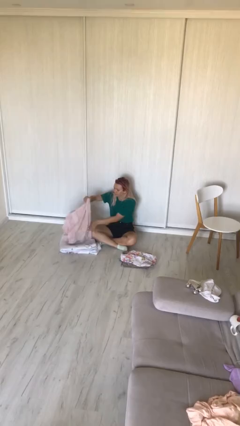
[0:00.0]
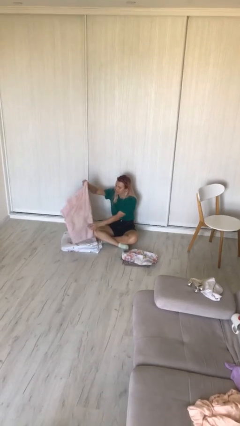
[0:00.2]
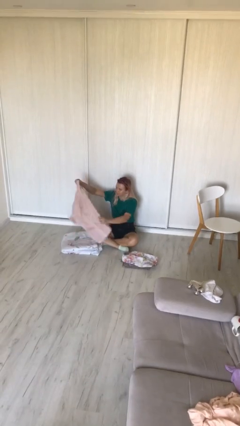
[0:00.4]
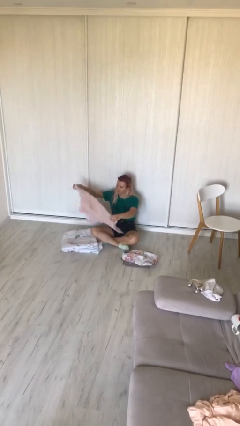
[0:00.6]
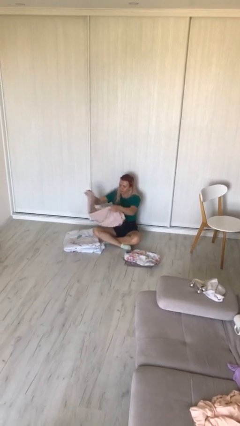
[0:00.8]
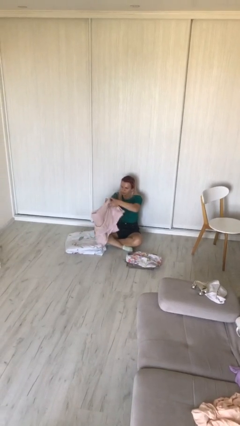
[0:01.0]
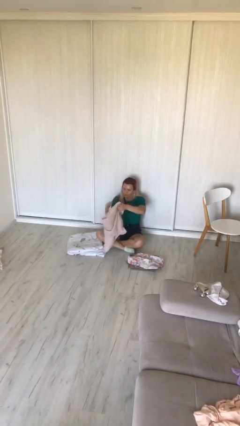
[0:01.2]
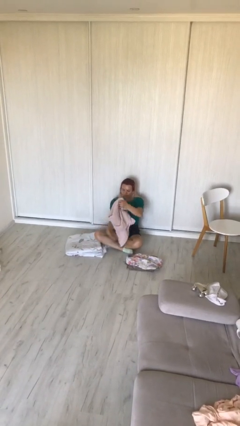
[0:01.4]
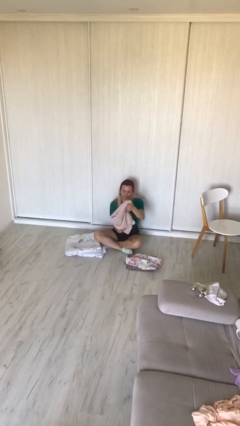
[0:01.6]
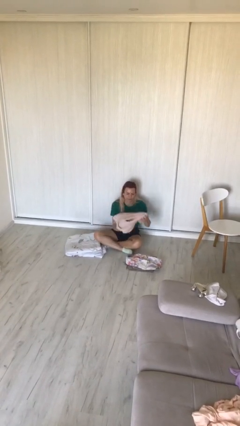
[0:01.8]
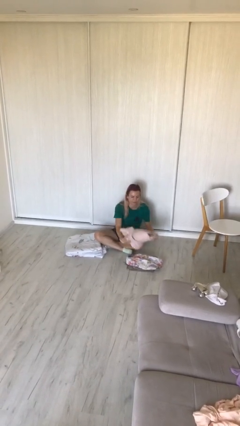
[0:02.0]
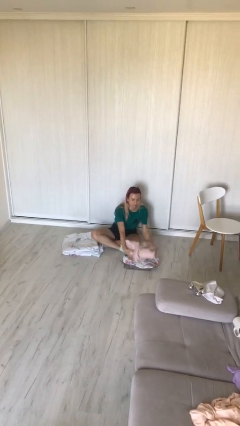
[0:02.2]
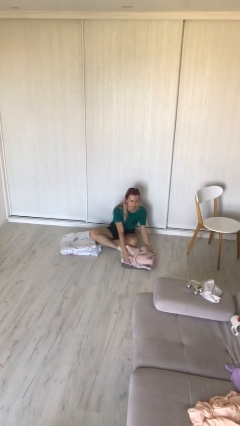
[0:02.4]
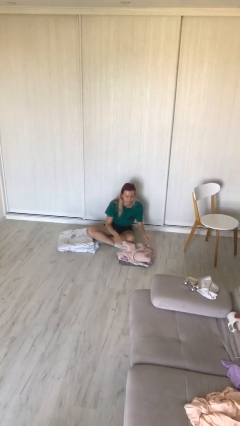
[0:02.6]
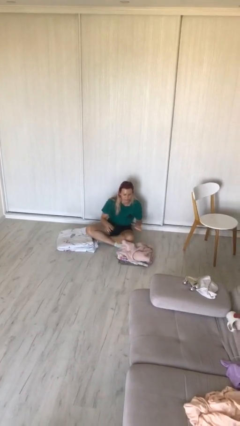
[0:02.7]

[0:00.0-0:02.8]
person folds towel

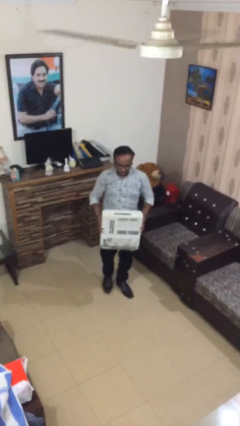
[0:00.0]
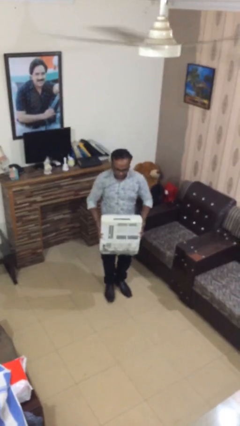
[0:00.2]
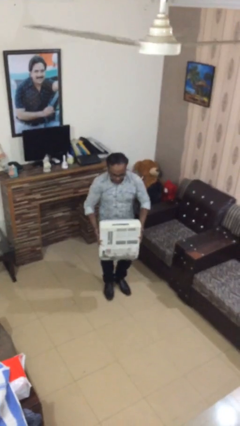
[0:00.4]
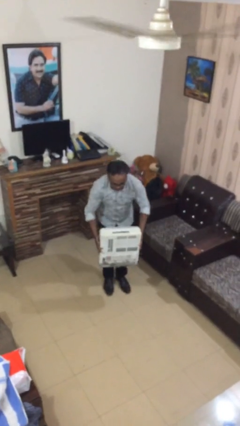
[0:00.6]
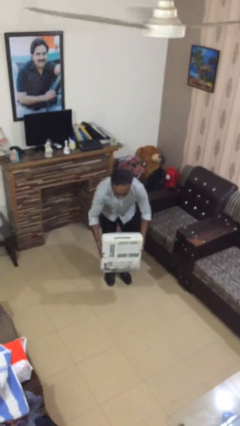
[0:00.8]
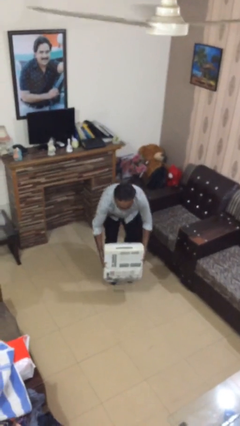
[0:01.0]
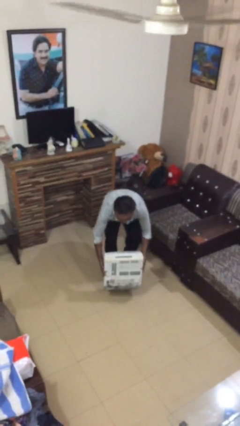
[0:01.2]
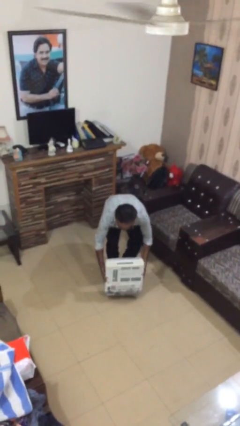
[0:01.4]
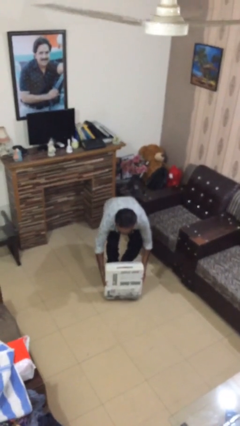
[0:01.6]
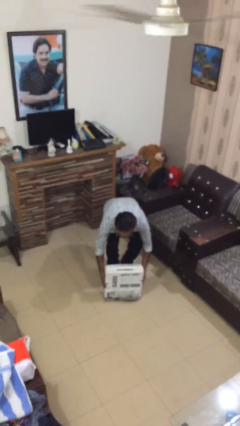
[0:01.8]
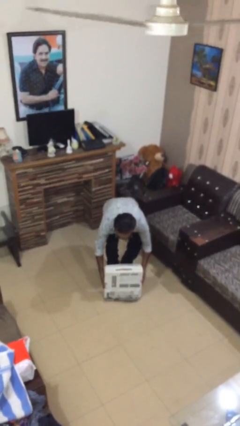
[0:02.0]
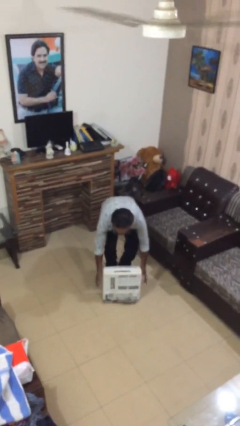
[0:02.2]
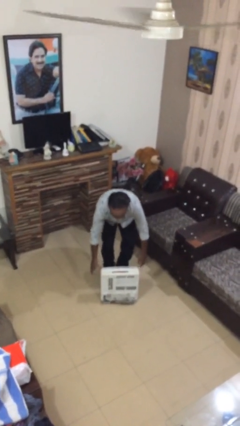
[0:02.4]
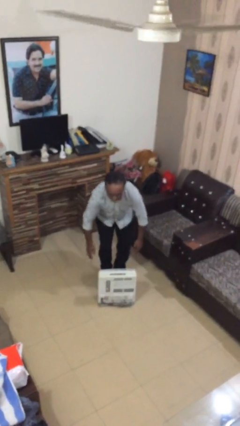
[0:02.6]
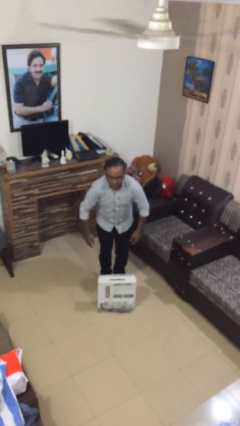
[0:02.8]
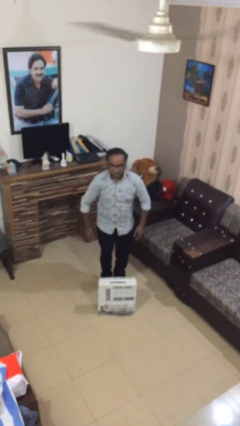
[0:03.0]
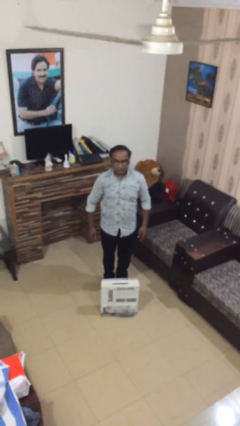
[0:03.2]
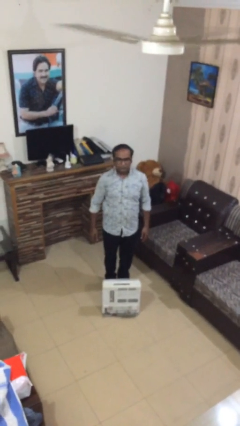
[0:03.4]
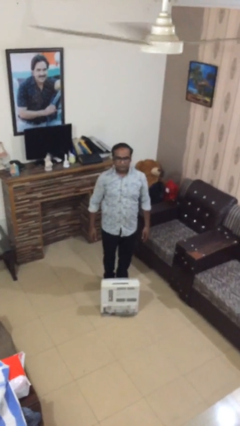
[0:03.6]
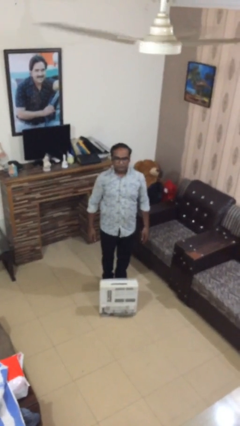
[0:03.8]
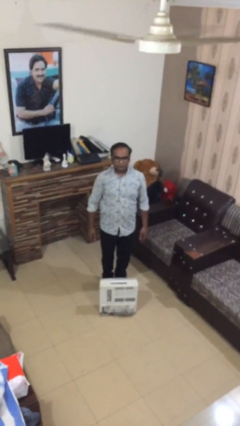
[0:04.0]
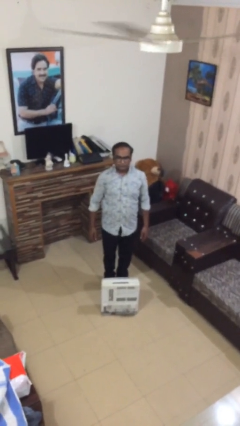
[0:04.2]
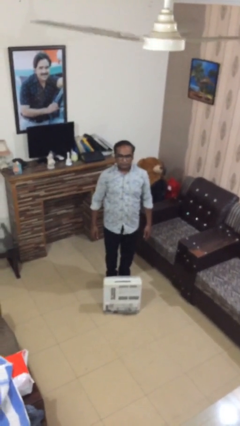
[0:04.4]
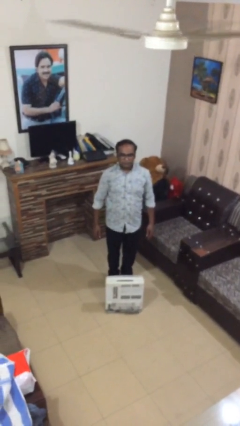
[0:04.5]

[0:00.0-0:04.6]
person puts down object on floor

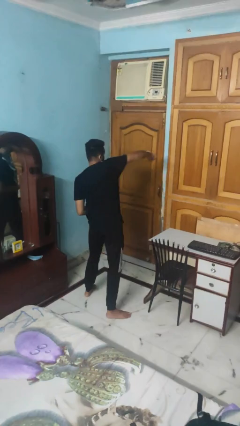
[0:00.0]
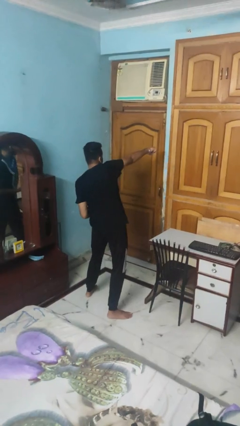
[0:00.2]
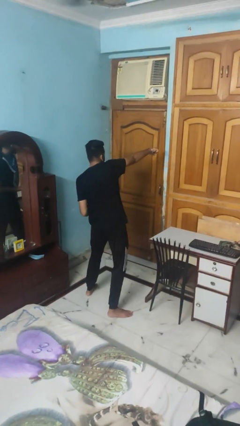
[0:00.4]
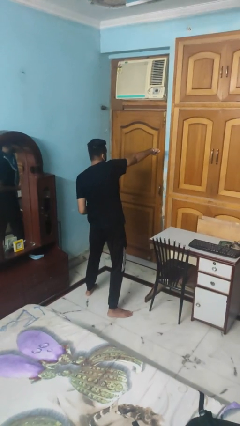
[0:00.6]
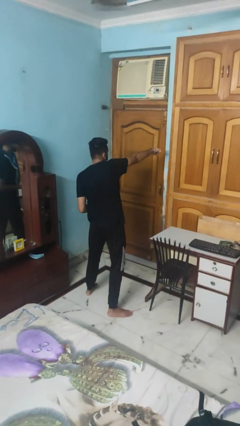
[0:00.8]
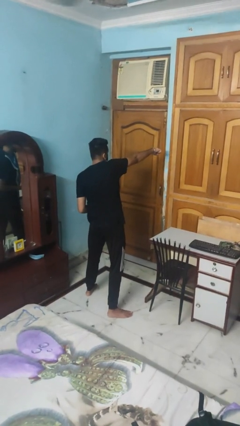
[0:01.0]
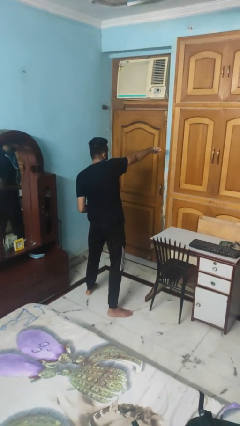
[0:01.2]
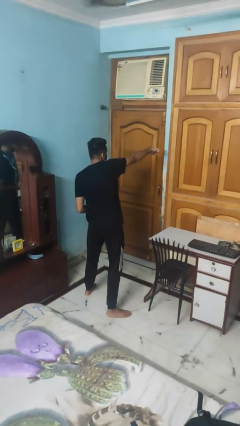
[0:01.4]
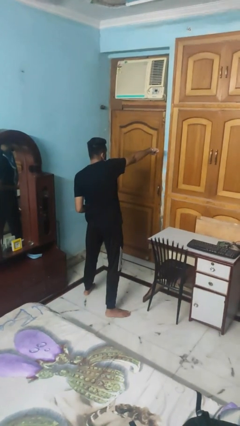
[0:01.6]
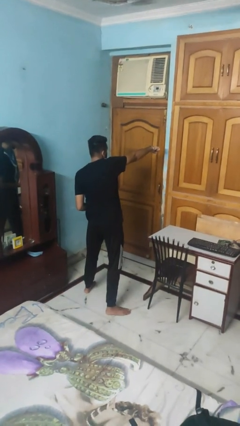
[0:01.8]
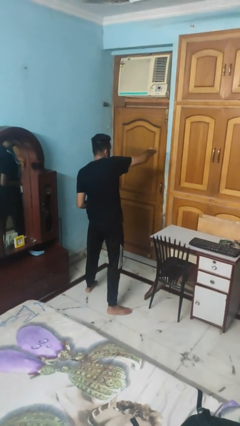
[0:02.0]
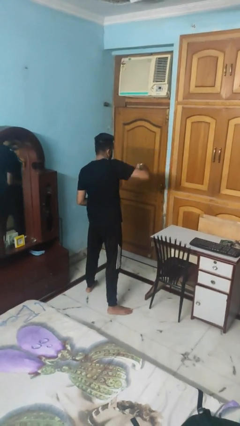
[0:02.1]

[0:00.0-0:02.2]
person punches

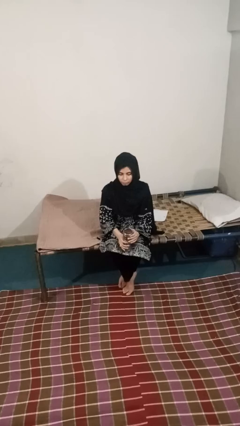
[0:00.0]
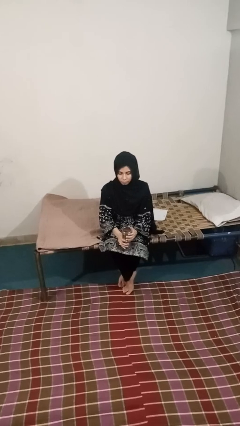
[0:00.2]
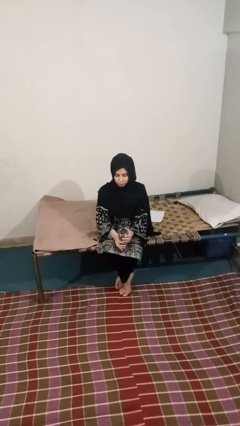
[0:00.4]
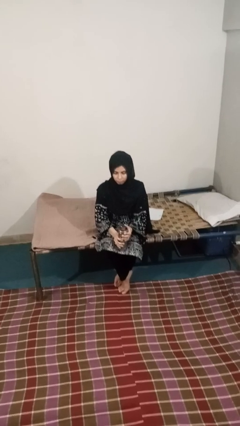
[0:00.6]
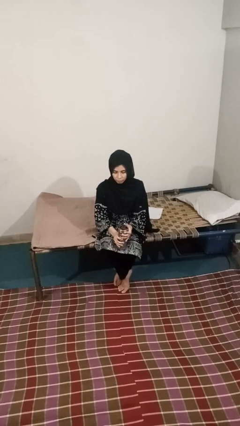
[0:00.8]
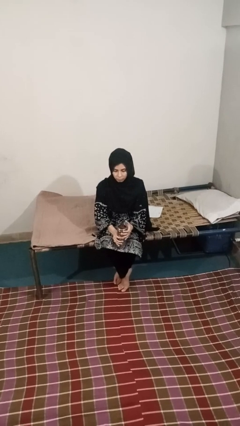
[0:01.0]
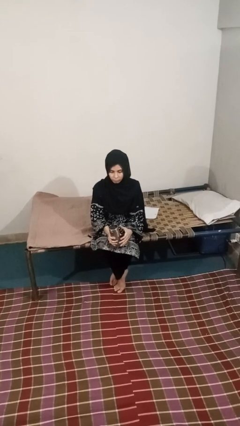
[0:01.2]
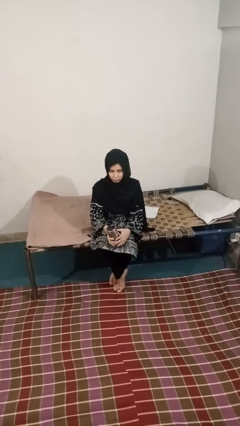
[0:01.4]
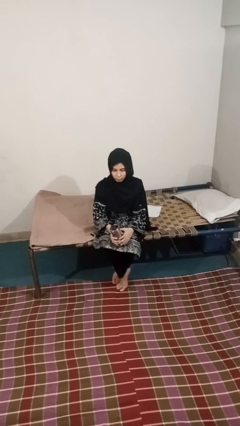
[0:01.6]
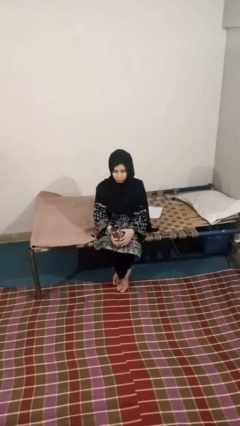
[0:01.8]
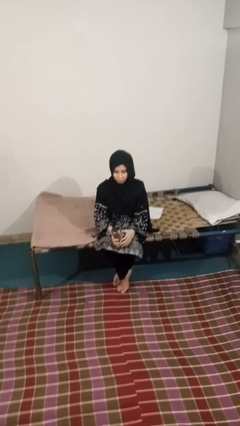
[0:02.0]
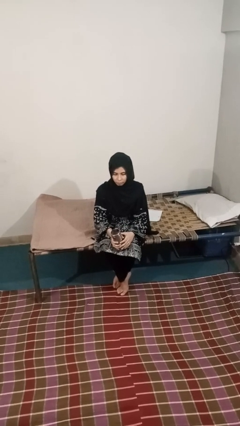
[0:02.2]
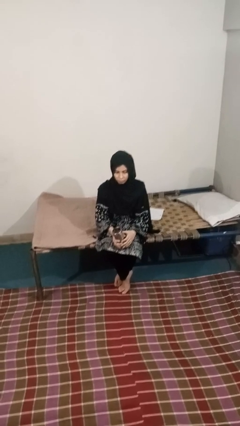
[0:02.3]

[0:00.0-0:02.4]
person opens beverage can

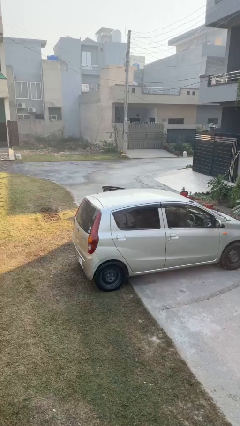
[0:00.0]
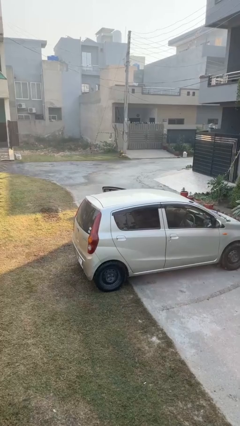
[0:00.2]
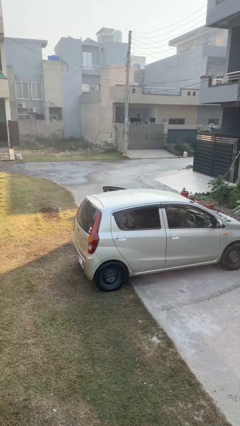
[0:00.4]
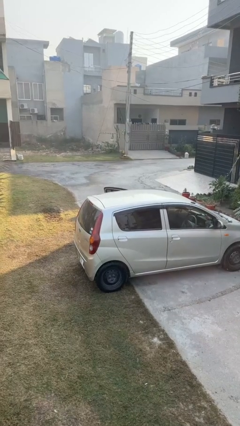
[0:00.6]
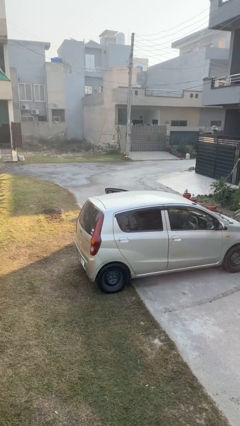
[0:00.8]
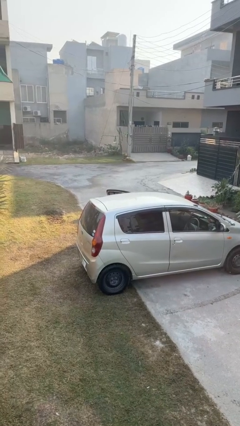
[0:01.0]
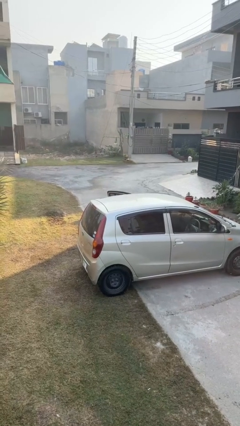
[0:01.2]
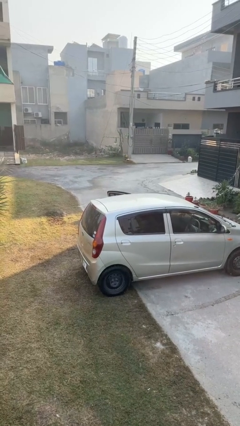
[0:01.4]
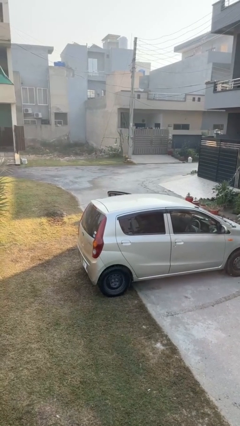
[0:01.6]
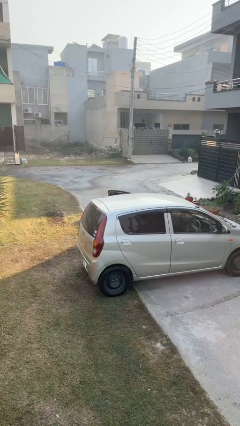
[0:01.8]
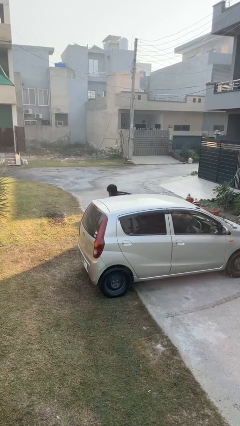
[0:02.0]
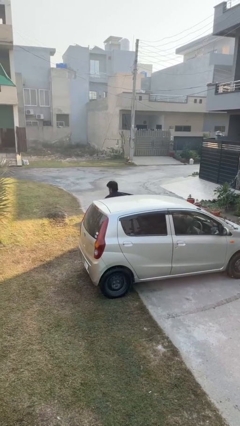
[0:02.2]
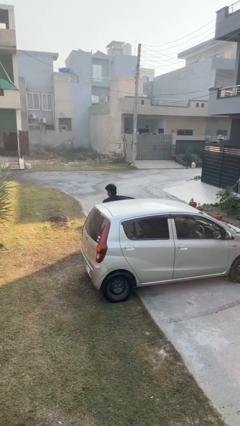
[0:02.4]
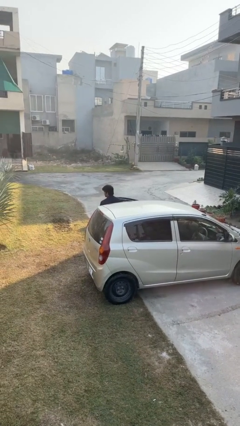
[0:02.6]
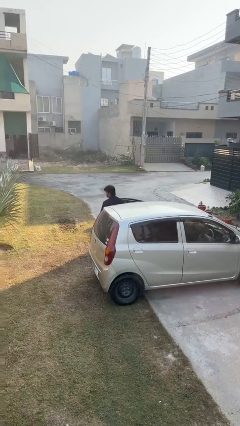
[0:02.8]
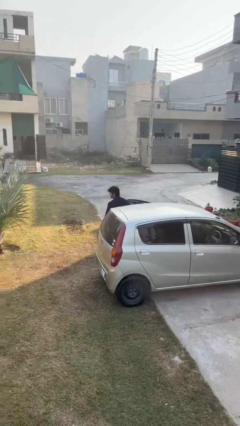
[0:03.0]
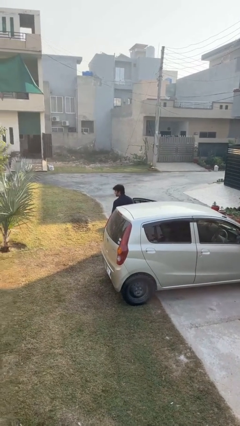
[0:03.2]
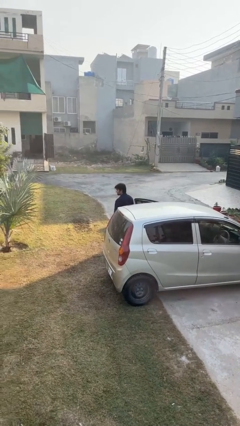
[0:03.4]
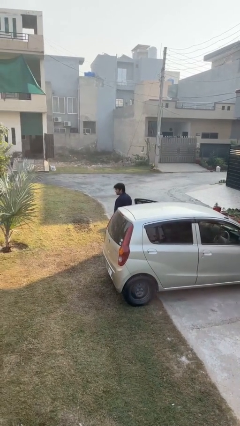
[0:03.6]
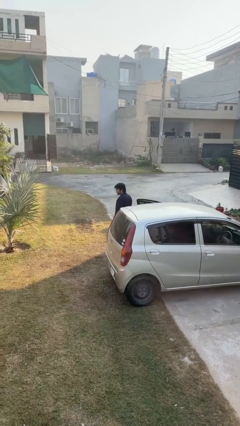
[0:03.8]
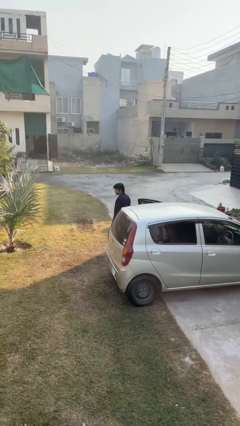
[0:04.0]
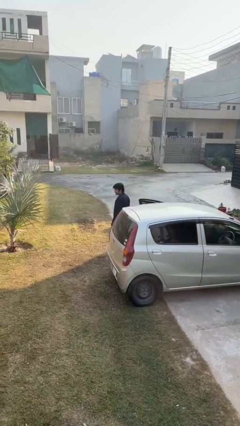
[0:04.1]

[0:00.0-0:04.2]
person exits car

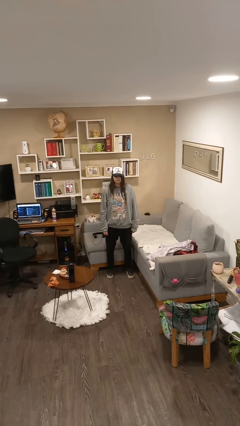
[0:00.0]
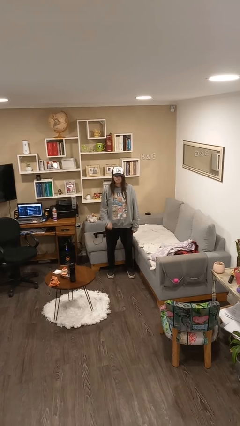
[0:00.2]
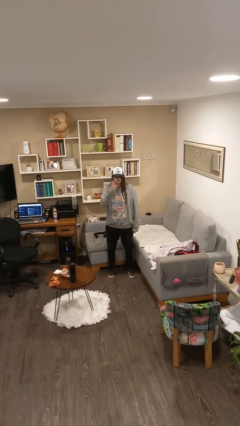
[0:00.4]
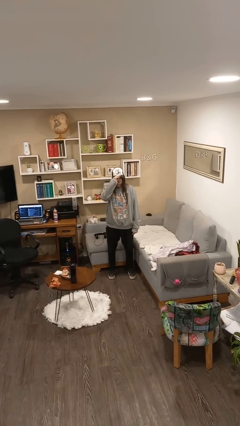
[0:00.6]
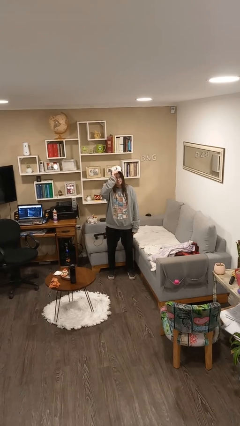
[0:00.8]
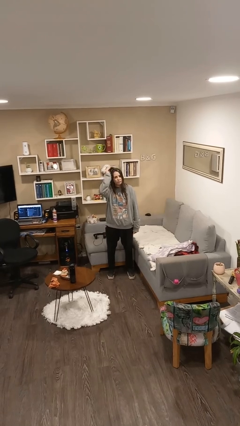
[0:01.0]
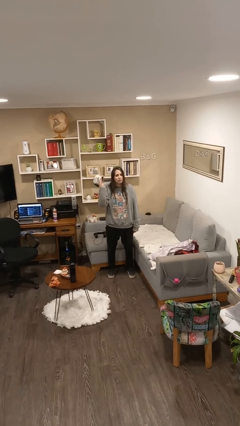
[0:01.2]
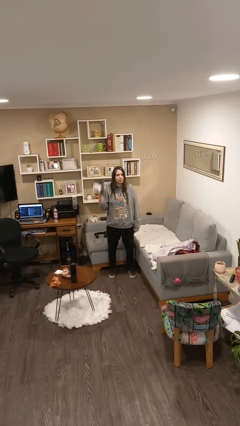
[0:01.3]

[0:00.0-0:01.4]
person takes off hat
